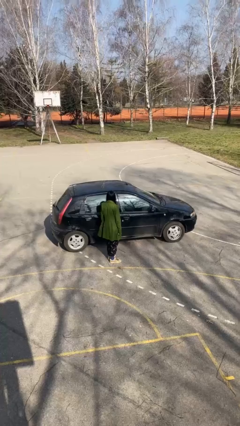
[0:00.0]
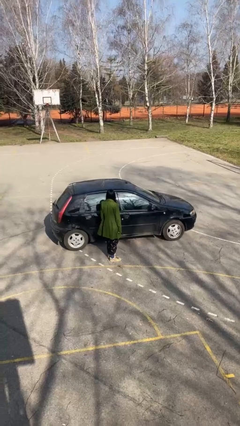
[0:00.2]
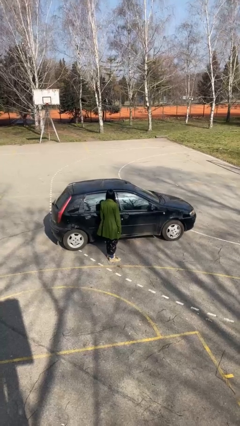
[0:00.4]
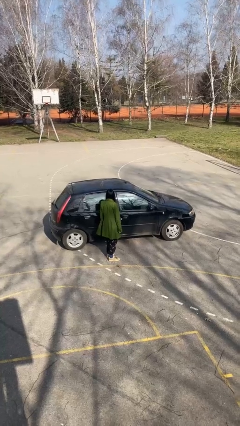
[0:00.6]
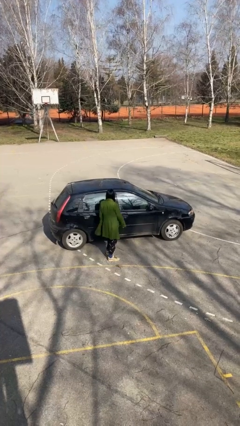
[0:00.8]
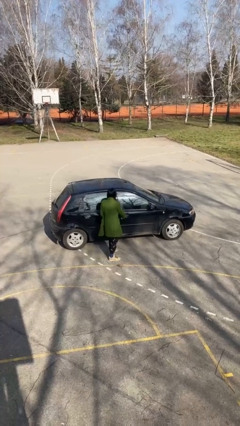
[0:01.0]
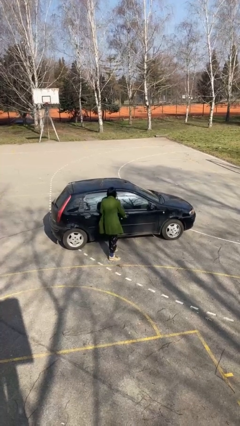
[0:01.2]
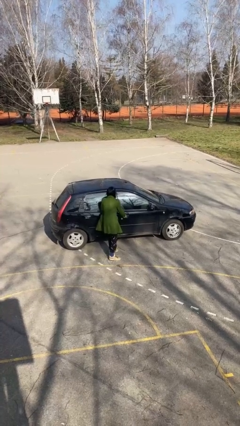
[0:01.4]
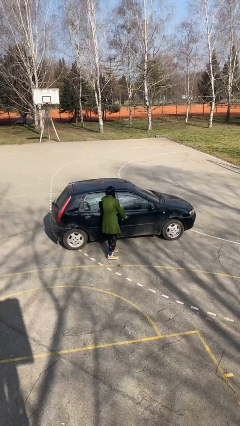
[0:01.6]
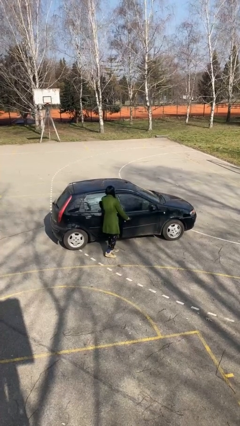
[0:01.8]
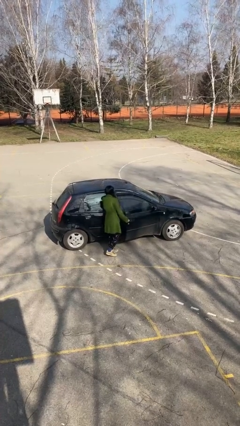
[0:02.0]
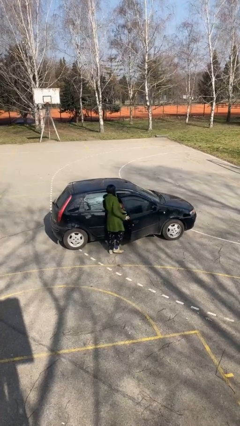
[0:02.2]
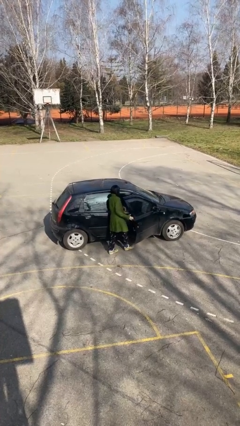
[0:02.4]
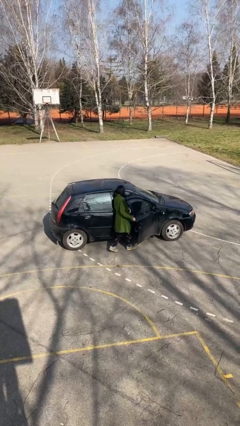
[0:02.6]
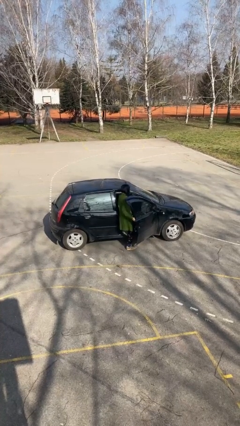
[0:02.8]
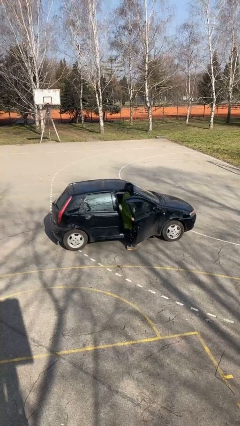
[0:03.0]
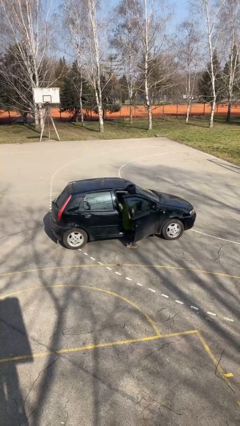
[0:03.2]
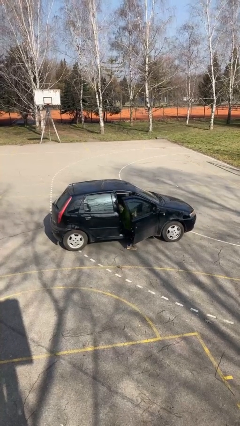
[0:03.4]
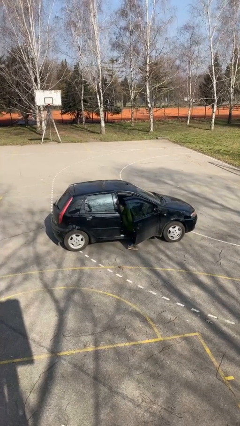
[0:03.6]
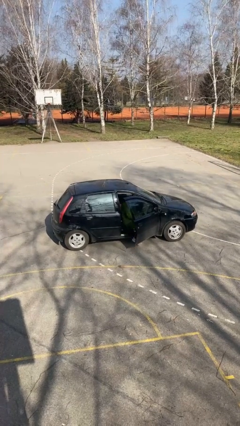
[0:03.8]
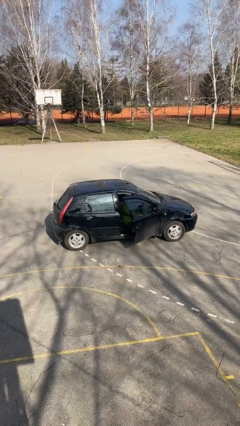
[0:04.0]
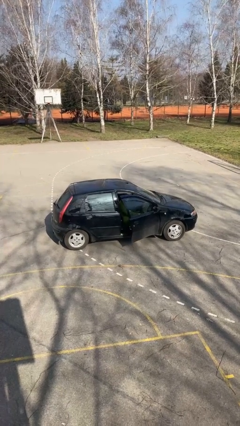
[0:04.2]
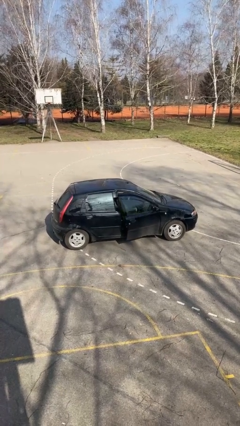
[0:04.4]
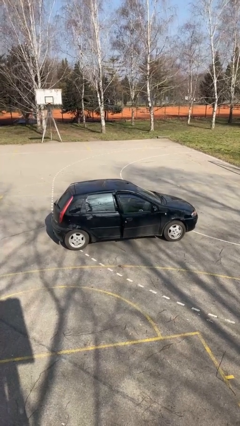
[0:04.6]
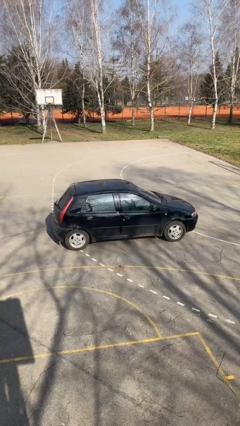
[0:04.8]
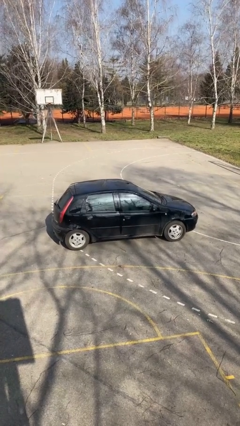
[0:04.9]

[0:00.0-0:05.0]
car picks up person

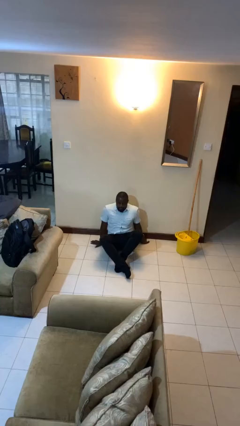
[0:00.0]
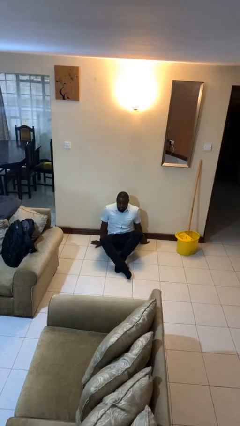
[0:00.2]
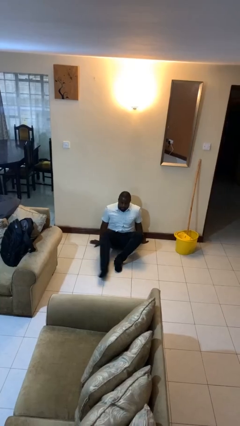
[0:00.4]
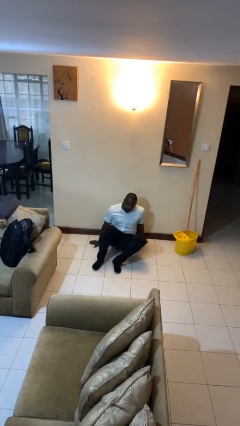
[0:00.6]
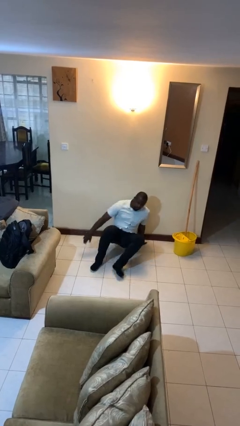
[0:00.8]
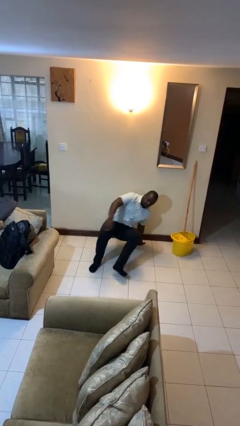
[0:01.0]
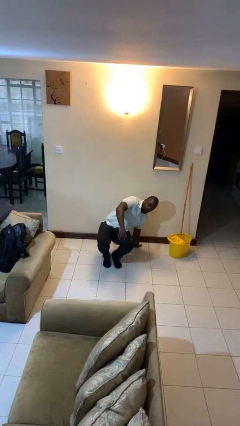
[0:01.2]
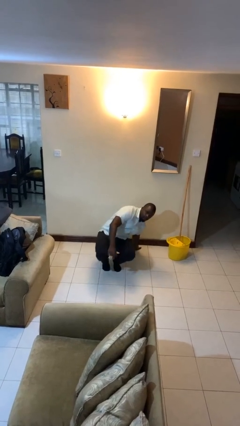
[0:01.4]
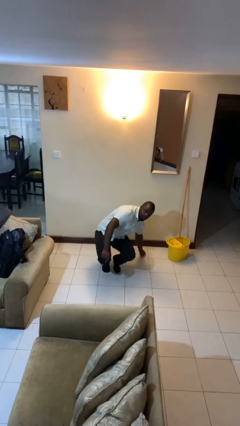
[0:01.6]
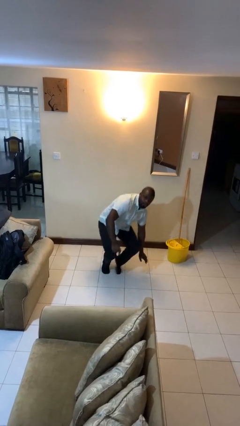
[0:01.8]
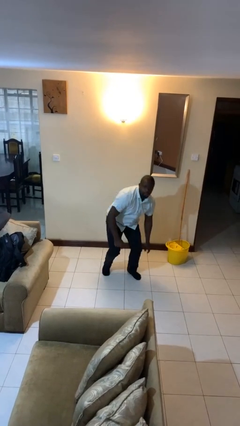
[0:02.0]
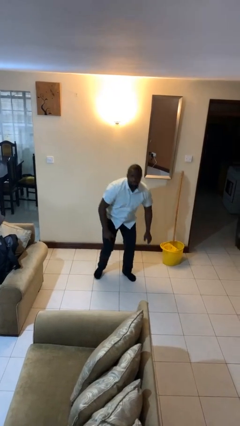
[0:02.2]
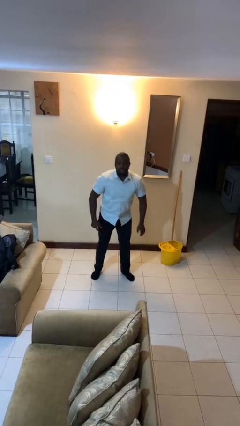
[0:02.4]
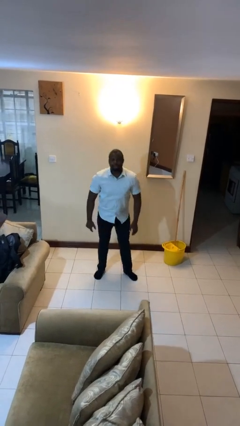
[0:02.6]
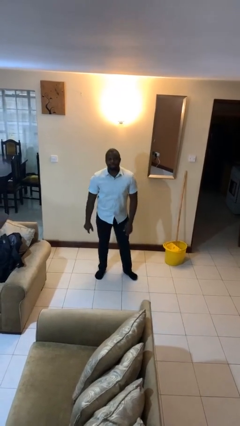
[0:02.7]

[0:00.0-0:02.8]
person stands up from floor

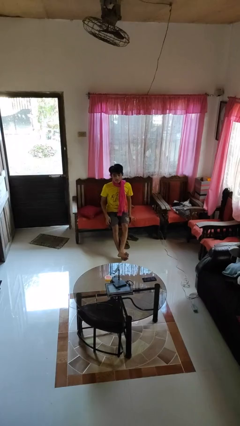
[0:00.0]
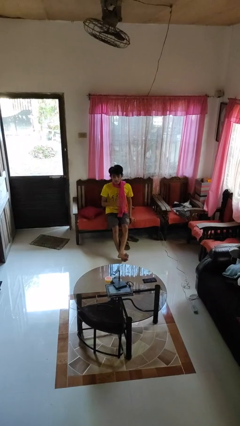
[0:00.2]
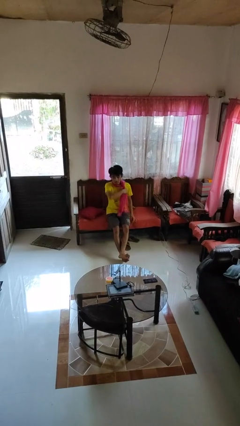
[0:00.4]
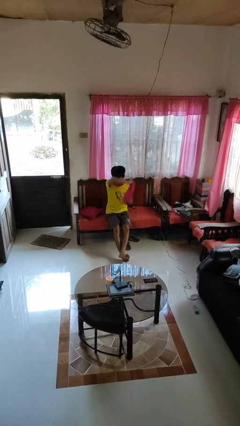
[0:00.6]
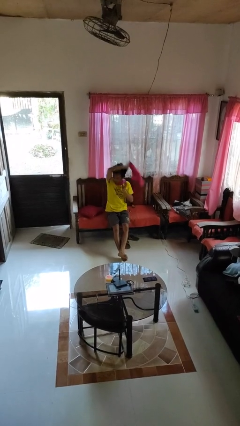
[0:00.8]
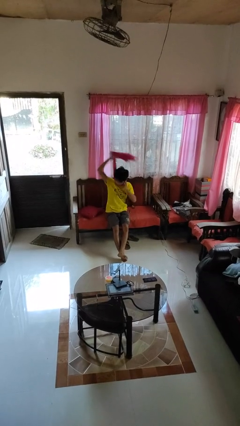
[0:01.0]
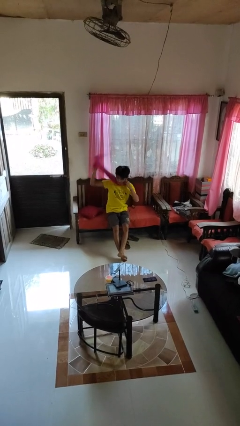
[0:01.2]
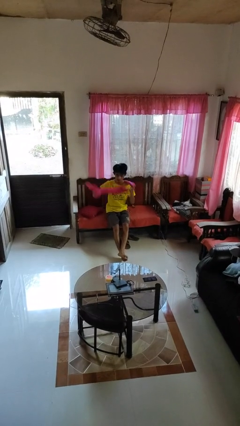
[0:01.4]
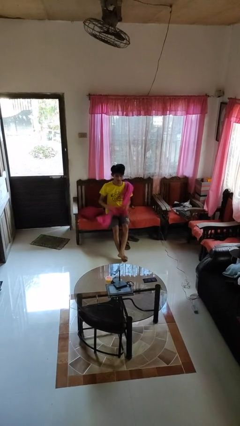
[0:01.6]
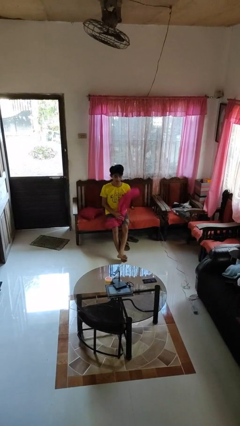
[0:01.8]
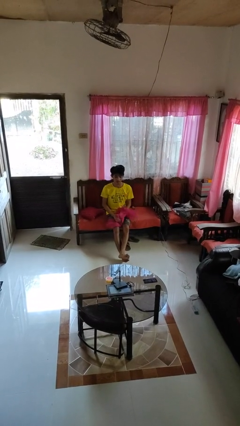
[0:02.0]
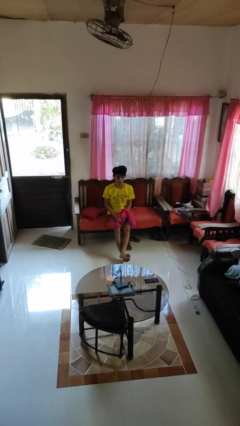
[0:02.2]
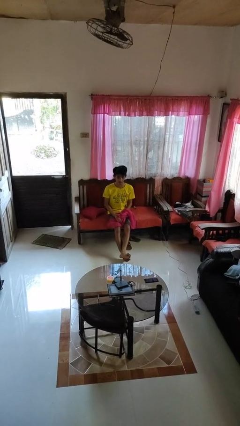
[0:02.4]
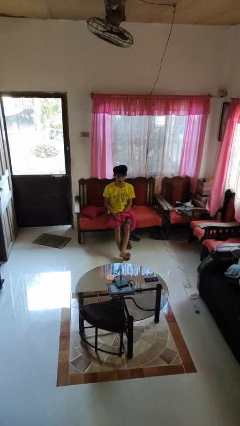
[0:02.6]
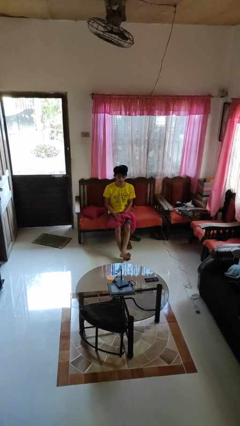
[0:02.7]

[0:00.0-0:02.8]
person takes off scarf

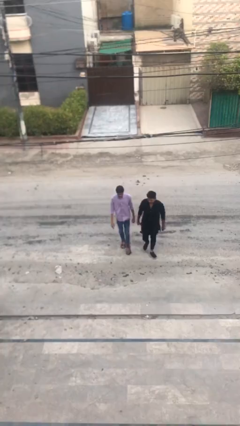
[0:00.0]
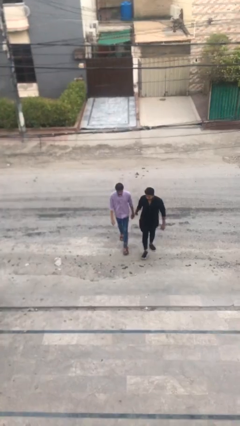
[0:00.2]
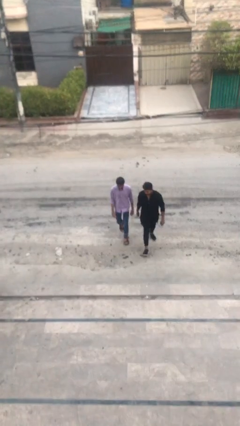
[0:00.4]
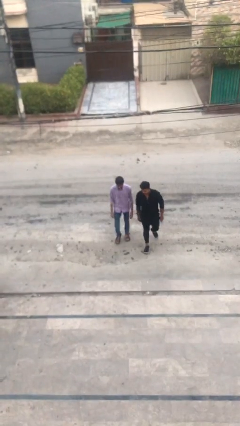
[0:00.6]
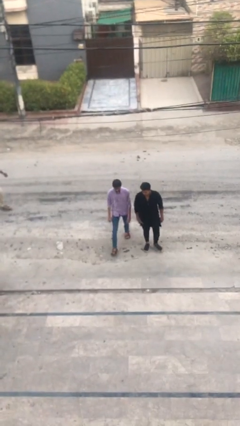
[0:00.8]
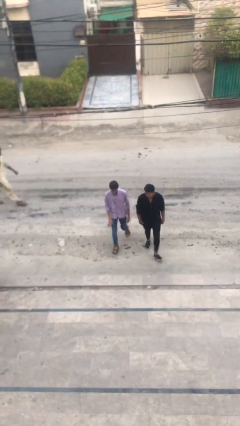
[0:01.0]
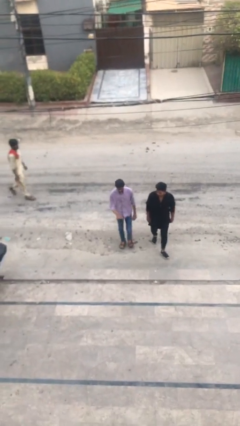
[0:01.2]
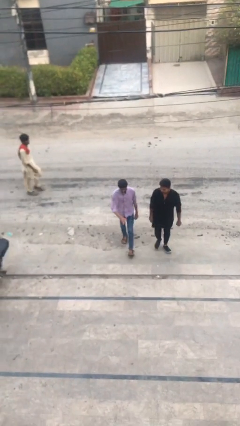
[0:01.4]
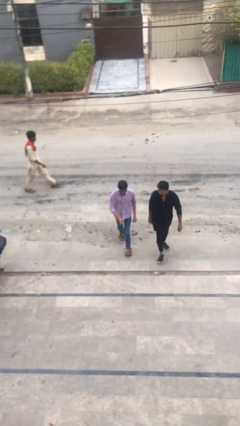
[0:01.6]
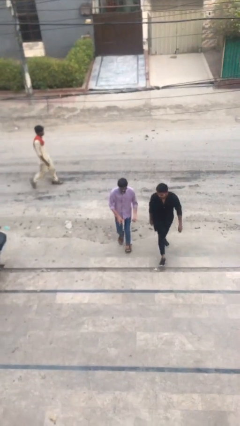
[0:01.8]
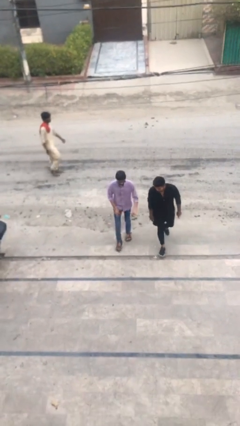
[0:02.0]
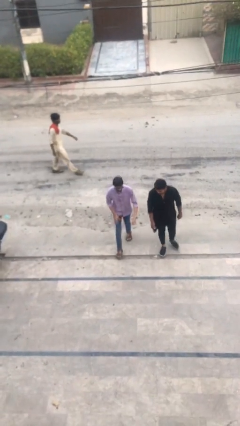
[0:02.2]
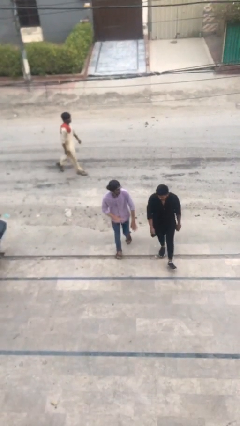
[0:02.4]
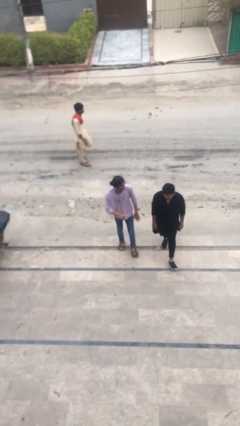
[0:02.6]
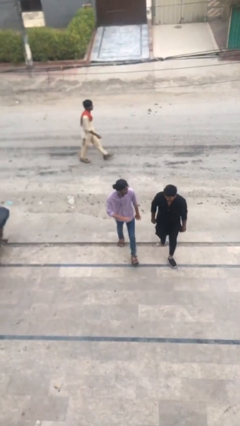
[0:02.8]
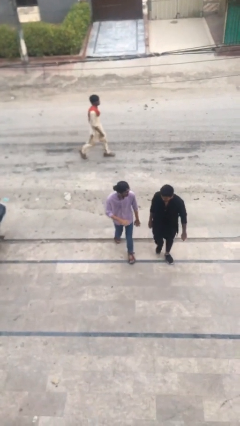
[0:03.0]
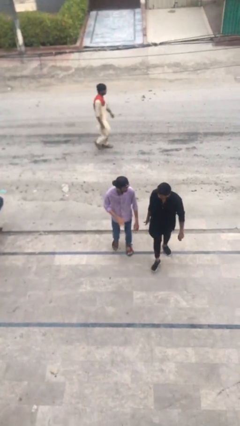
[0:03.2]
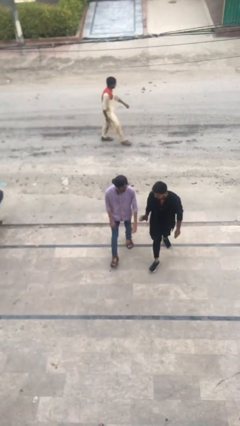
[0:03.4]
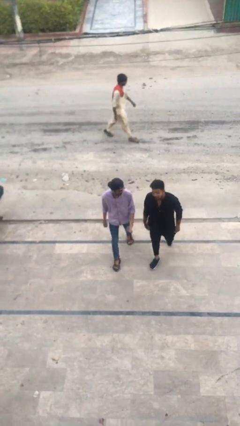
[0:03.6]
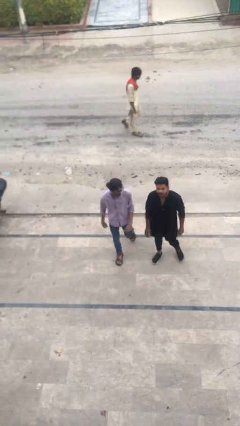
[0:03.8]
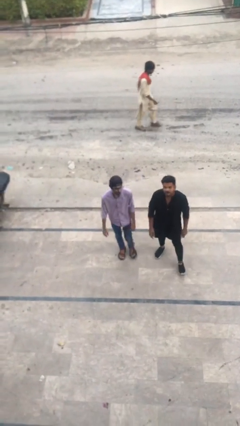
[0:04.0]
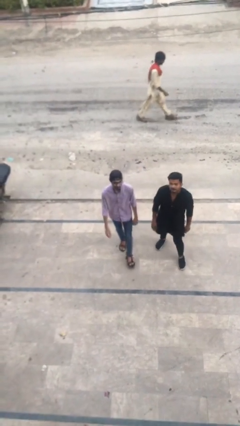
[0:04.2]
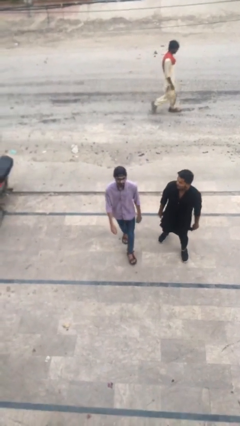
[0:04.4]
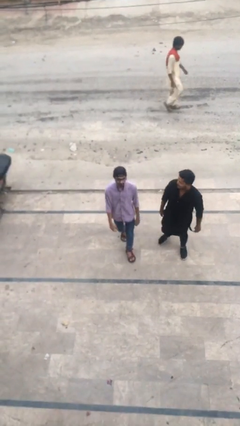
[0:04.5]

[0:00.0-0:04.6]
person talks to person

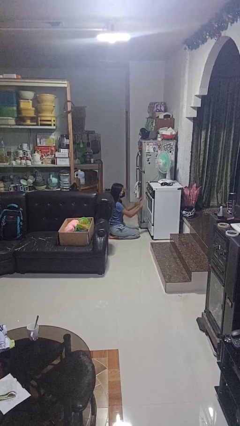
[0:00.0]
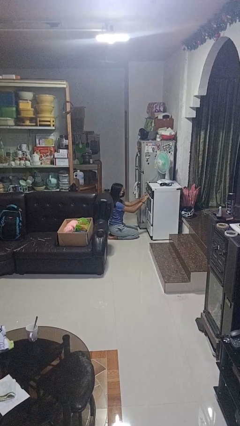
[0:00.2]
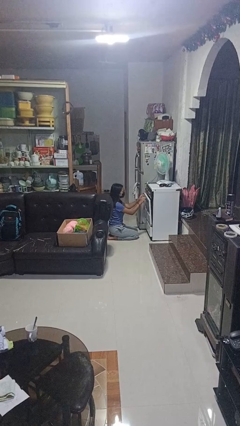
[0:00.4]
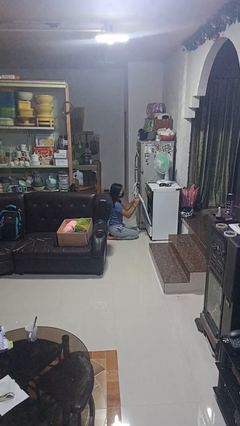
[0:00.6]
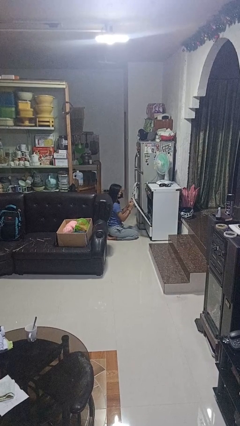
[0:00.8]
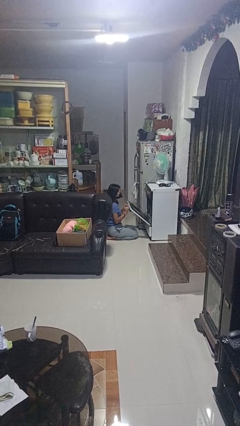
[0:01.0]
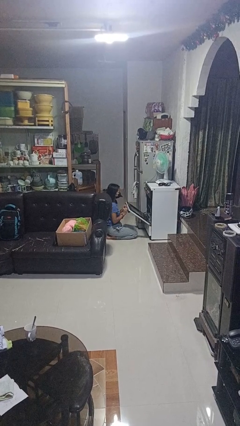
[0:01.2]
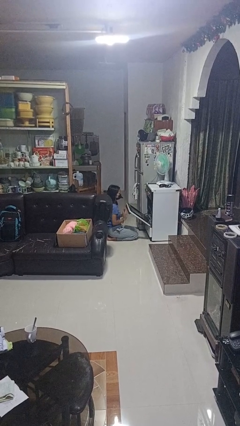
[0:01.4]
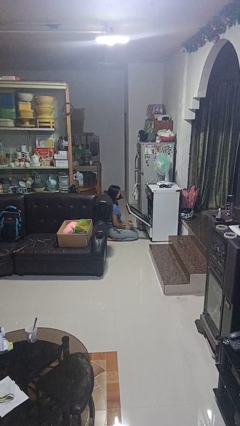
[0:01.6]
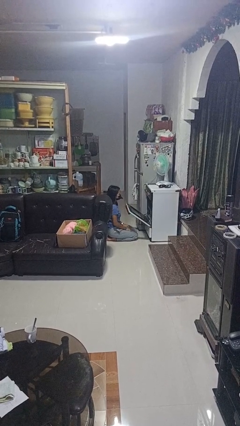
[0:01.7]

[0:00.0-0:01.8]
person opens oven door

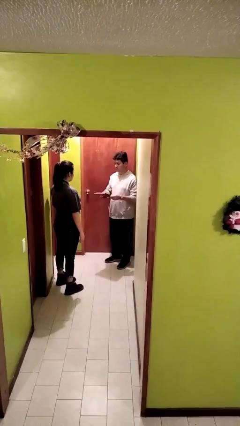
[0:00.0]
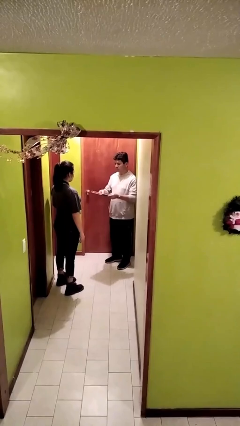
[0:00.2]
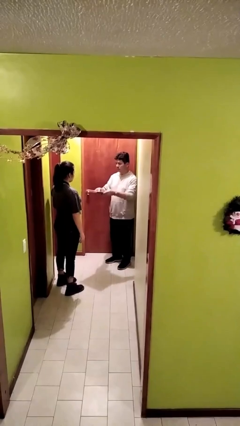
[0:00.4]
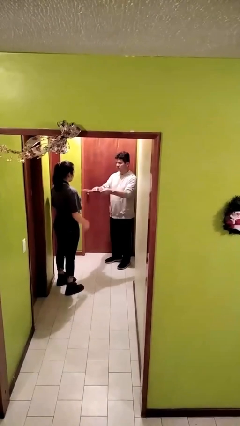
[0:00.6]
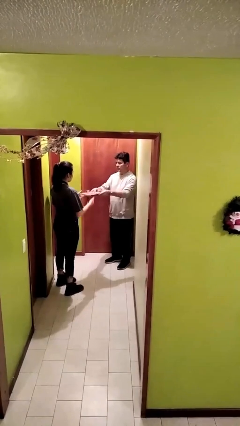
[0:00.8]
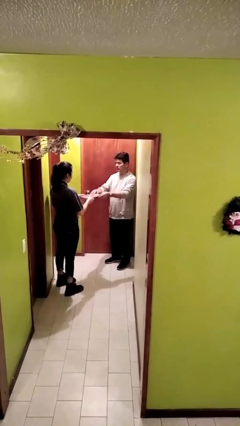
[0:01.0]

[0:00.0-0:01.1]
person transfers object to person
